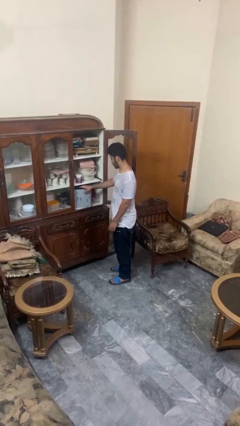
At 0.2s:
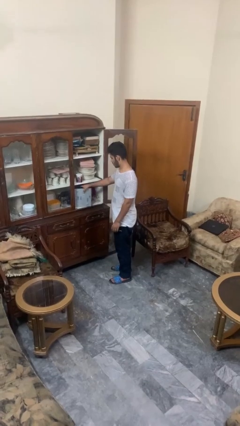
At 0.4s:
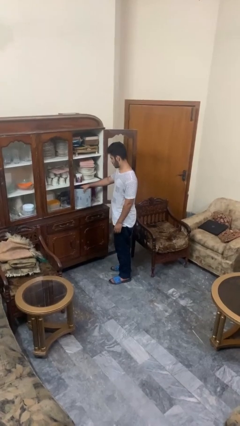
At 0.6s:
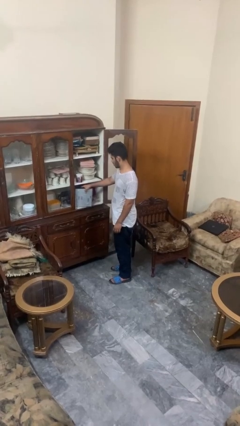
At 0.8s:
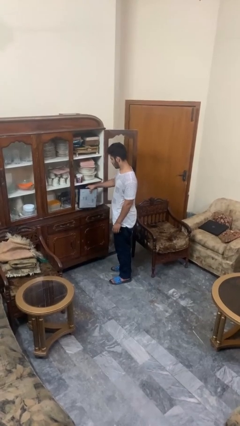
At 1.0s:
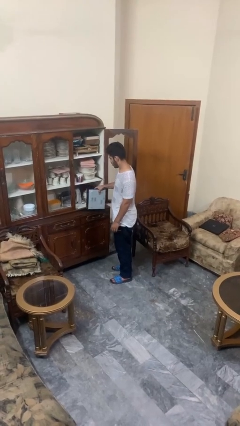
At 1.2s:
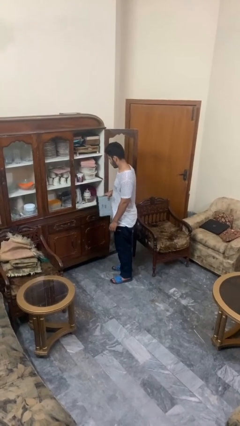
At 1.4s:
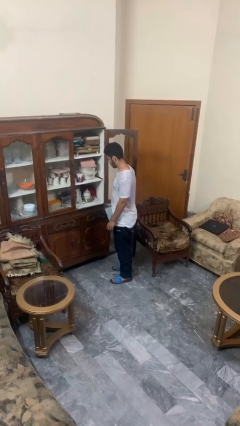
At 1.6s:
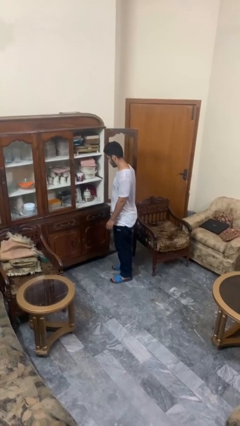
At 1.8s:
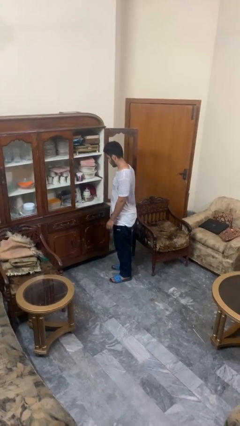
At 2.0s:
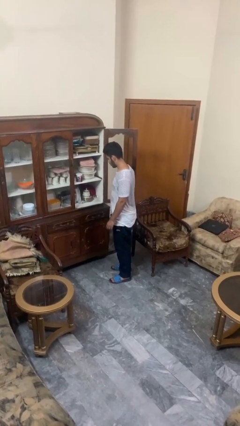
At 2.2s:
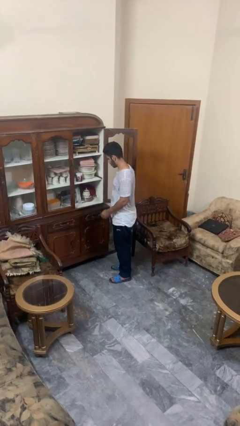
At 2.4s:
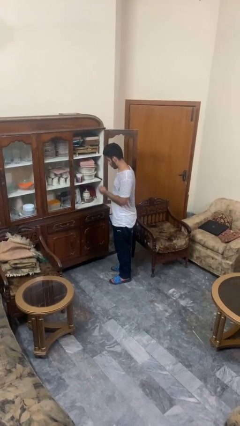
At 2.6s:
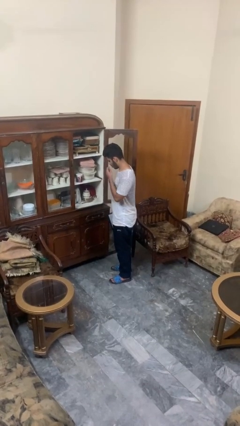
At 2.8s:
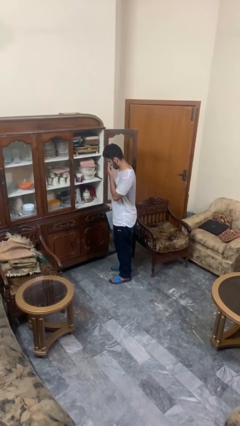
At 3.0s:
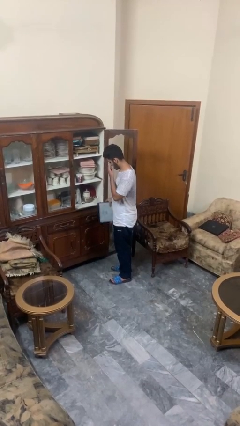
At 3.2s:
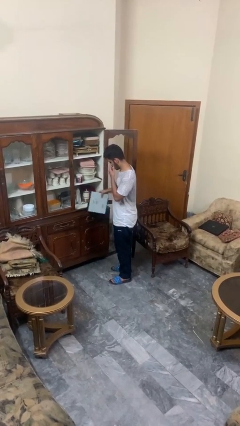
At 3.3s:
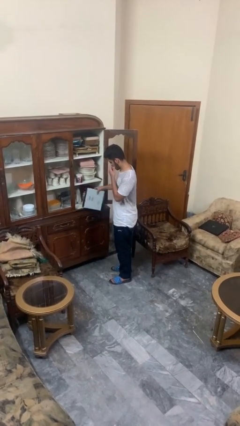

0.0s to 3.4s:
person picks up object from cabinet

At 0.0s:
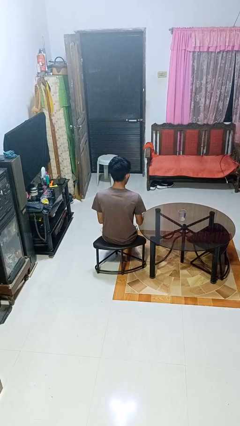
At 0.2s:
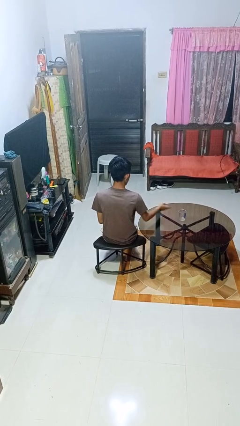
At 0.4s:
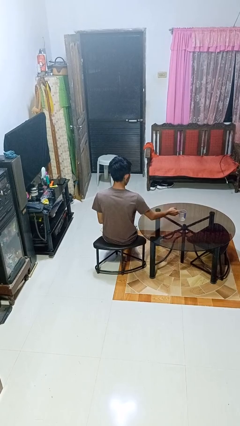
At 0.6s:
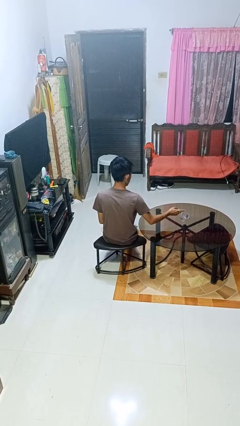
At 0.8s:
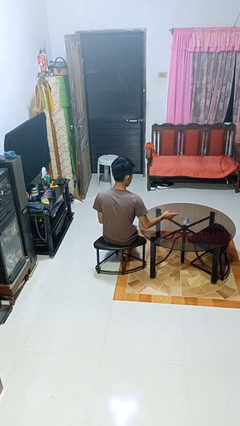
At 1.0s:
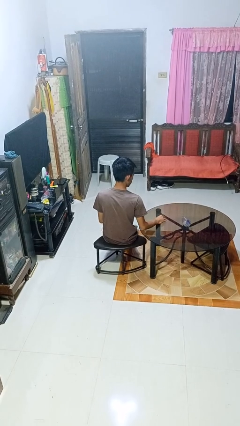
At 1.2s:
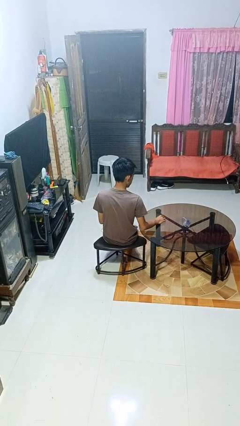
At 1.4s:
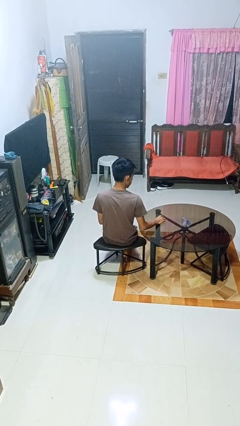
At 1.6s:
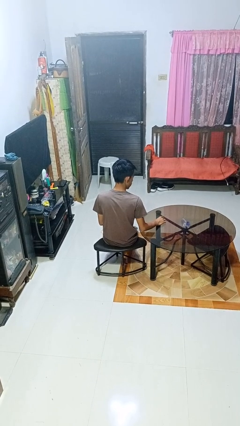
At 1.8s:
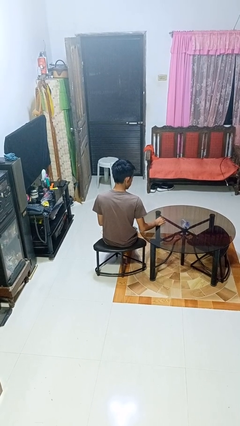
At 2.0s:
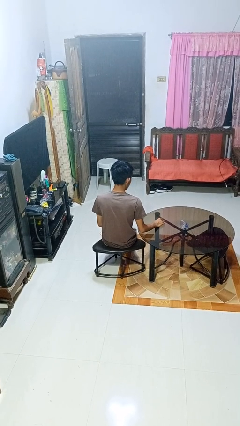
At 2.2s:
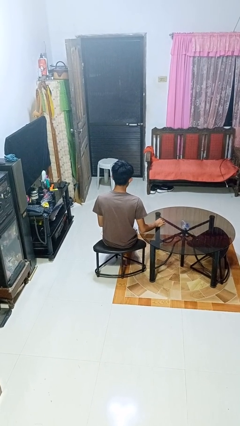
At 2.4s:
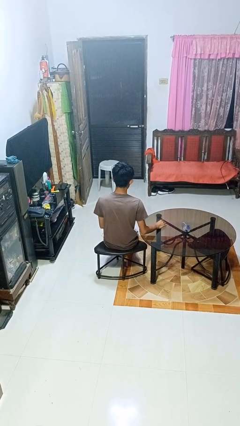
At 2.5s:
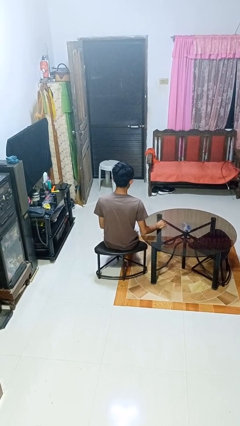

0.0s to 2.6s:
person spills on table

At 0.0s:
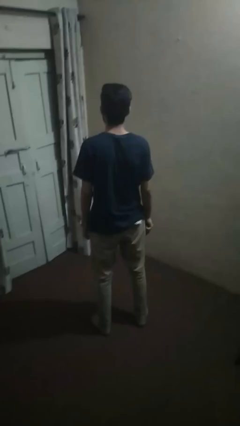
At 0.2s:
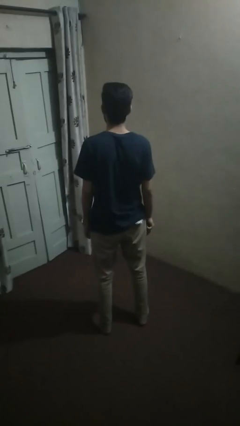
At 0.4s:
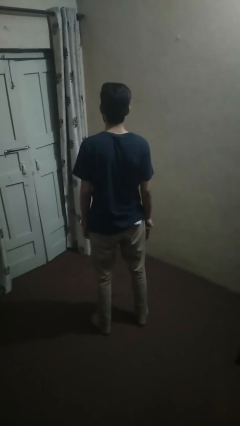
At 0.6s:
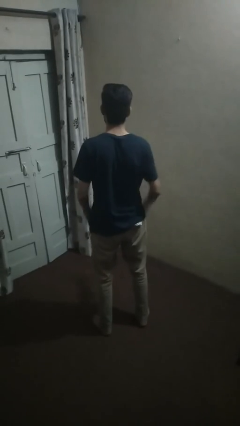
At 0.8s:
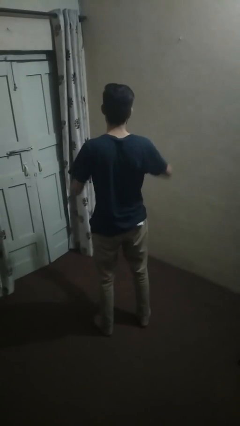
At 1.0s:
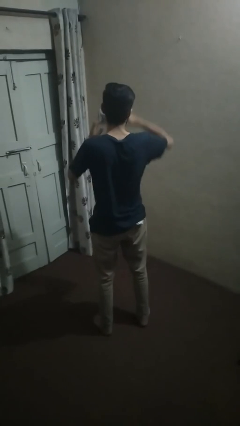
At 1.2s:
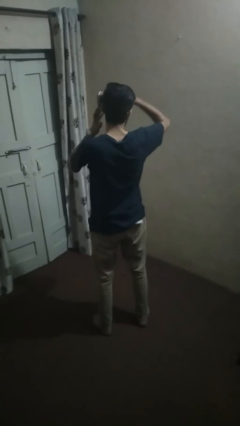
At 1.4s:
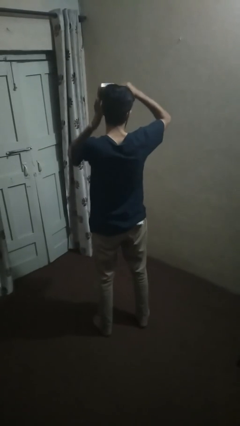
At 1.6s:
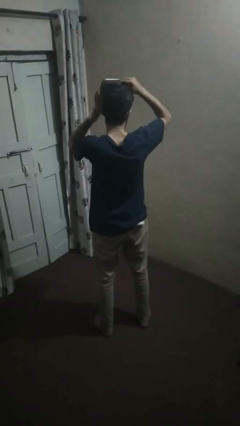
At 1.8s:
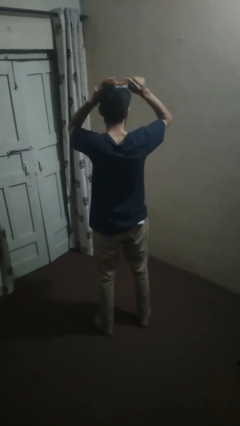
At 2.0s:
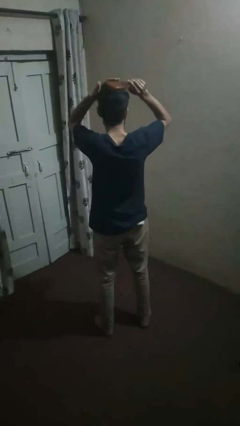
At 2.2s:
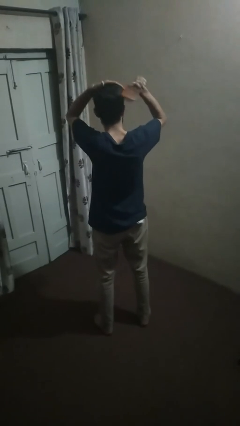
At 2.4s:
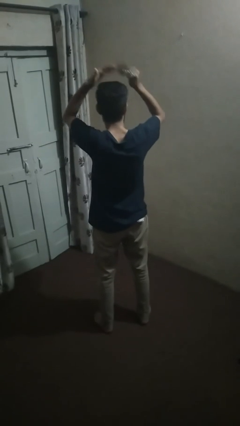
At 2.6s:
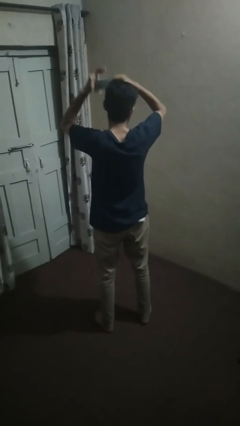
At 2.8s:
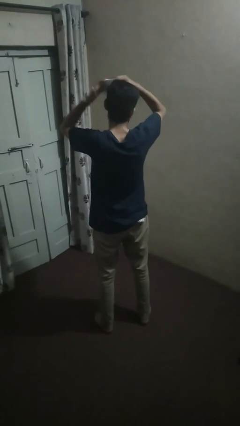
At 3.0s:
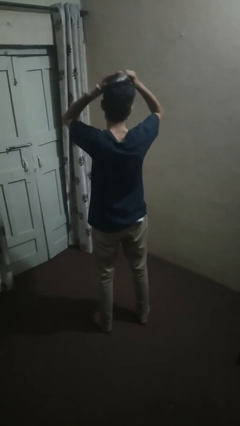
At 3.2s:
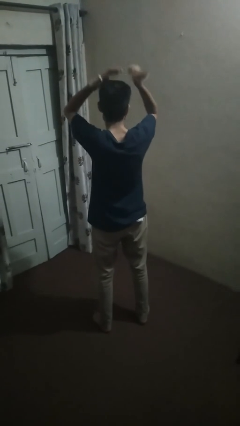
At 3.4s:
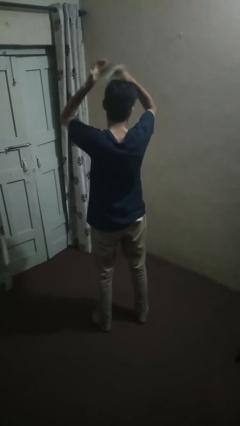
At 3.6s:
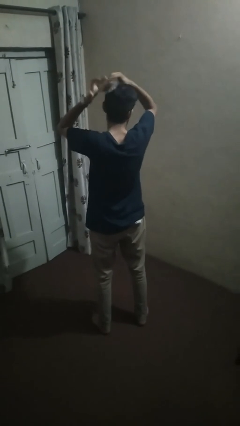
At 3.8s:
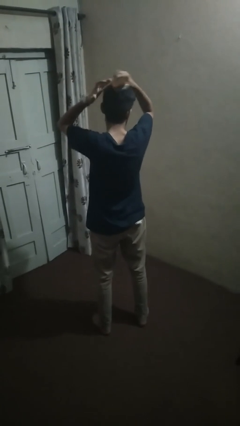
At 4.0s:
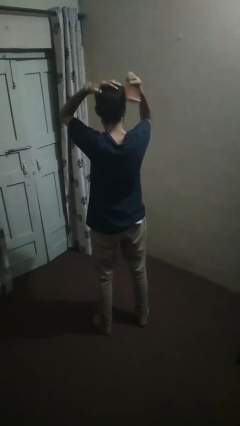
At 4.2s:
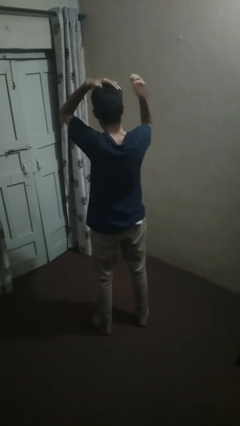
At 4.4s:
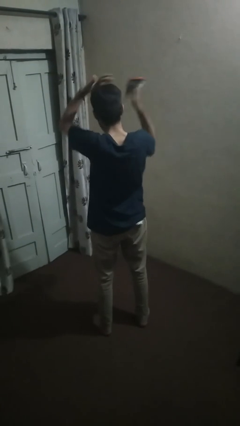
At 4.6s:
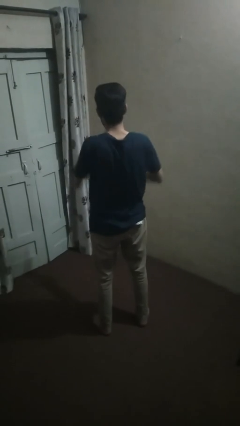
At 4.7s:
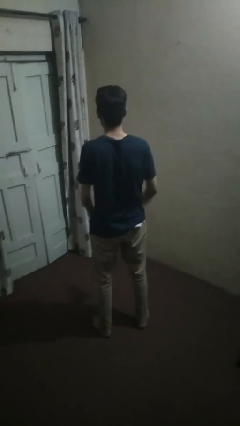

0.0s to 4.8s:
person brushes hair

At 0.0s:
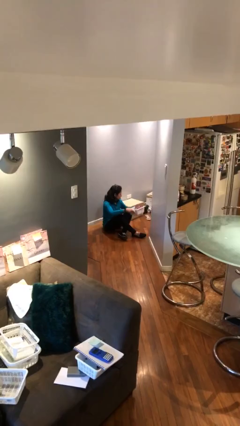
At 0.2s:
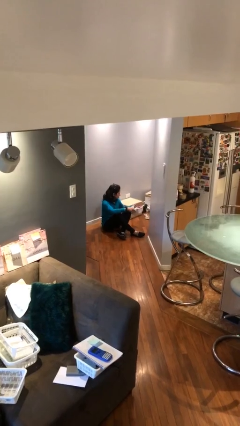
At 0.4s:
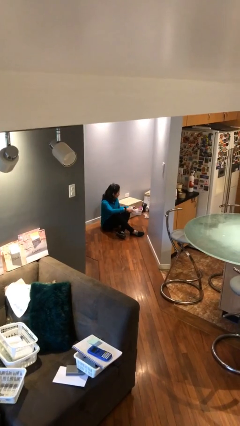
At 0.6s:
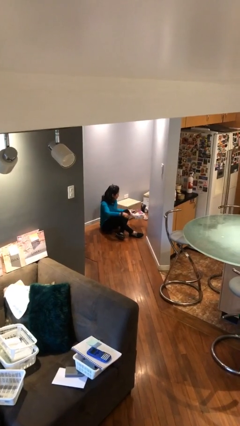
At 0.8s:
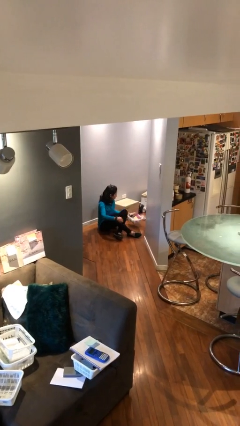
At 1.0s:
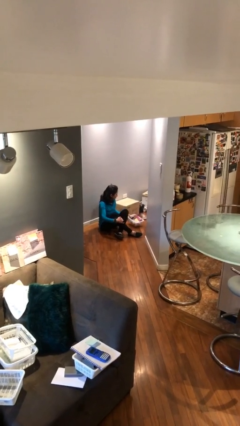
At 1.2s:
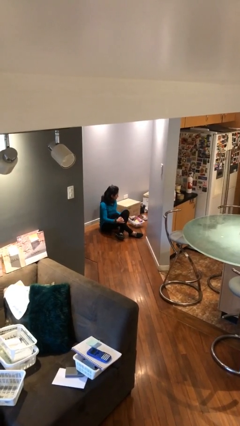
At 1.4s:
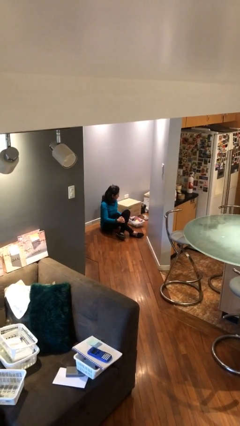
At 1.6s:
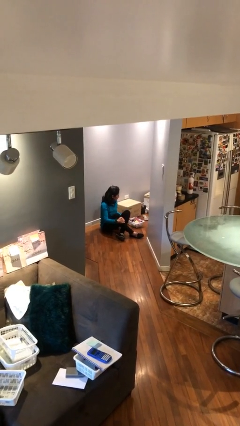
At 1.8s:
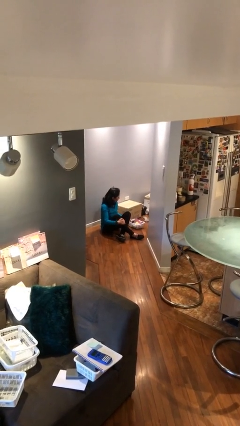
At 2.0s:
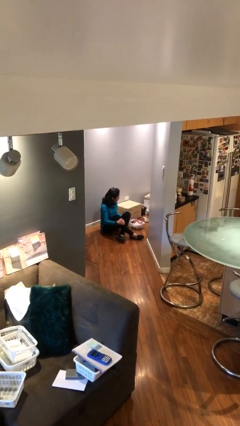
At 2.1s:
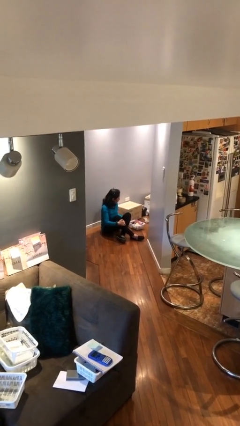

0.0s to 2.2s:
person puts down object on floor

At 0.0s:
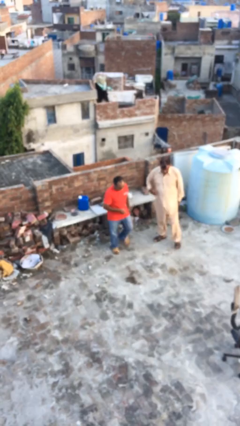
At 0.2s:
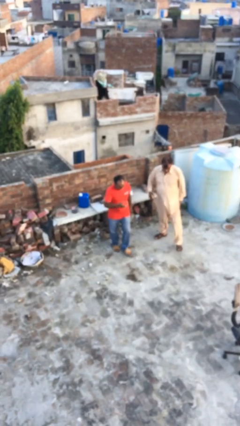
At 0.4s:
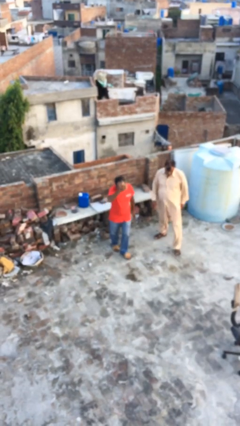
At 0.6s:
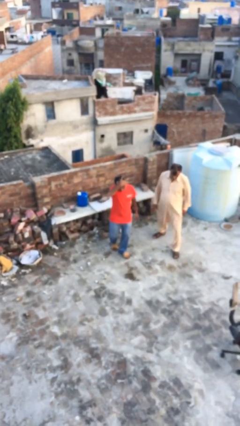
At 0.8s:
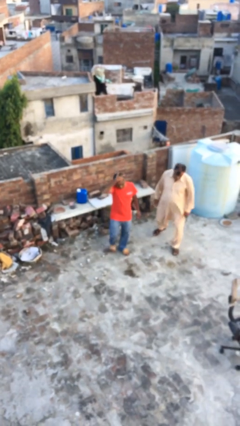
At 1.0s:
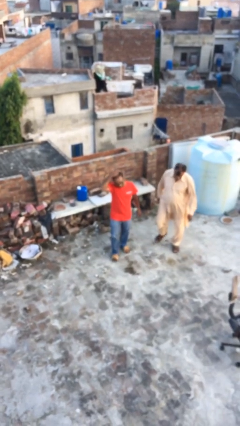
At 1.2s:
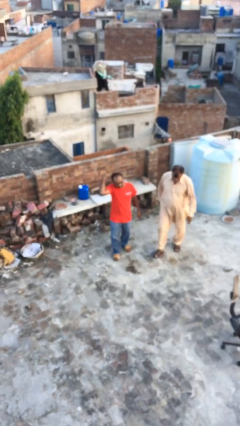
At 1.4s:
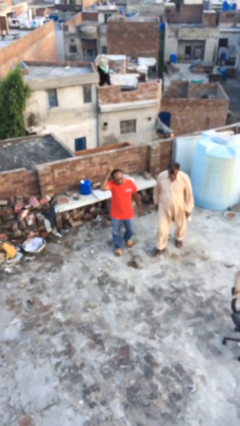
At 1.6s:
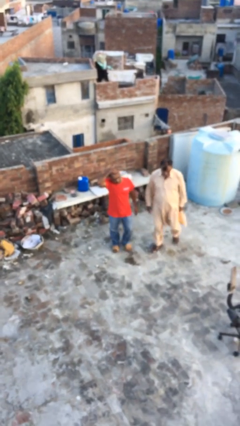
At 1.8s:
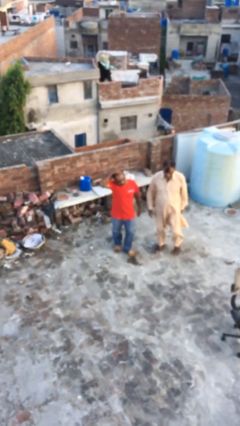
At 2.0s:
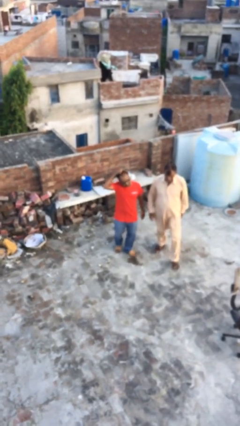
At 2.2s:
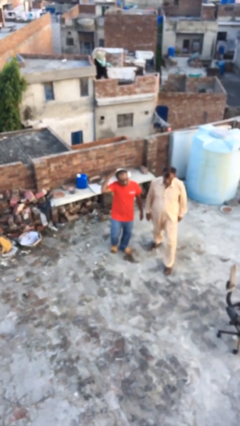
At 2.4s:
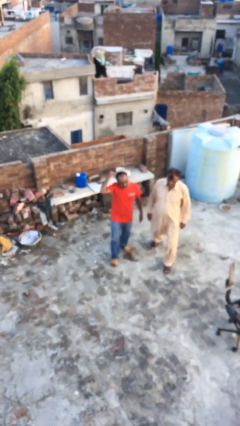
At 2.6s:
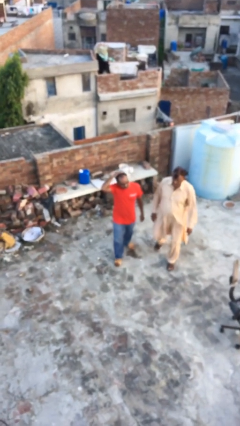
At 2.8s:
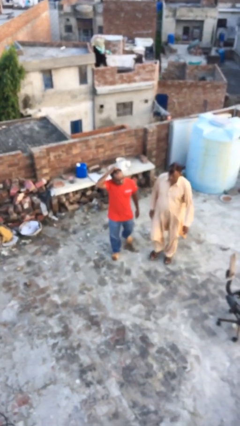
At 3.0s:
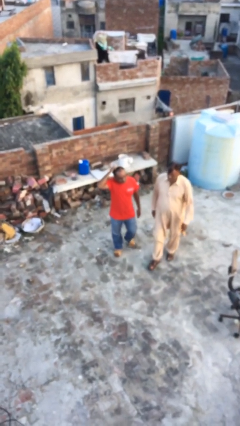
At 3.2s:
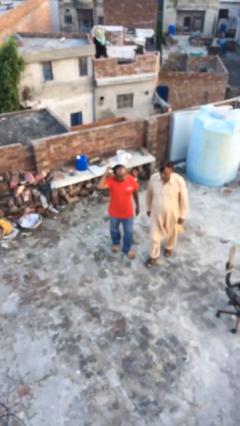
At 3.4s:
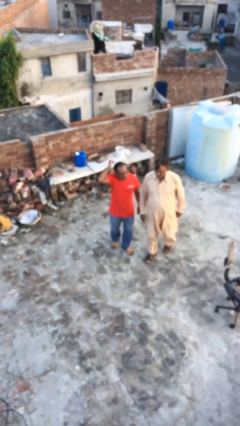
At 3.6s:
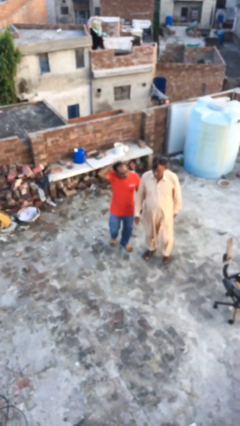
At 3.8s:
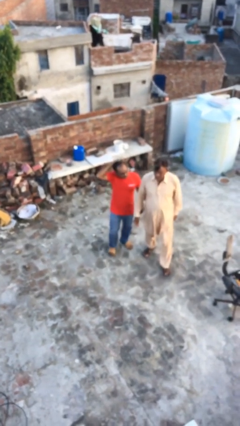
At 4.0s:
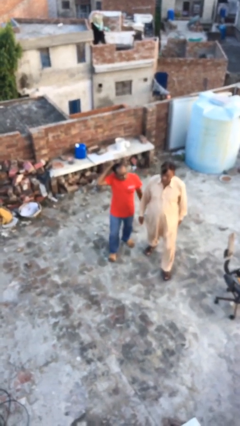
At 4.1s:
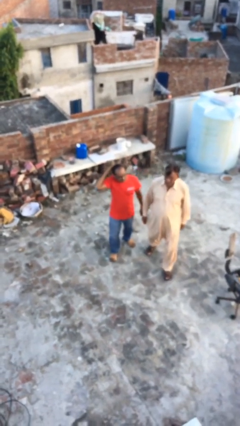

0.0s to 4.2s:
person talks to person

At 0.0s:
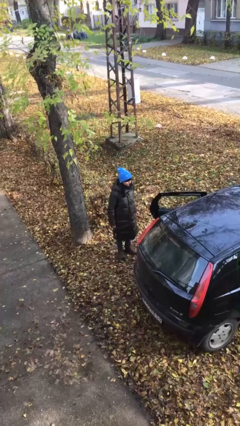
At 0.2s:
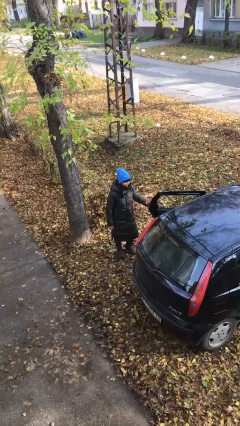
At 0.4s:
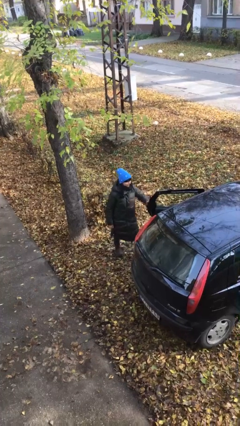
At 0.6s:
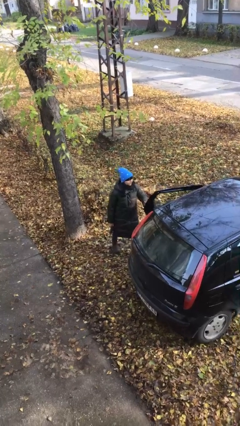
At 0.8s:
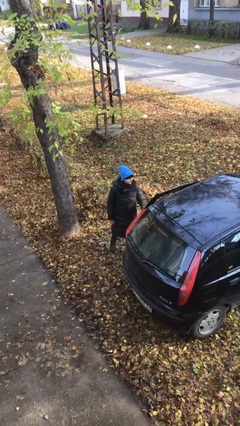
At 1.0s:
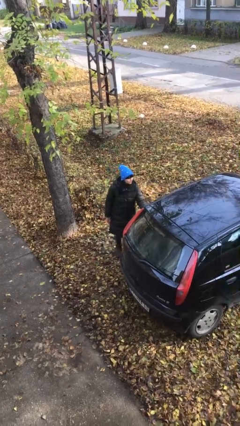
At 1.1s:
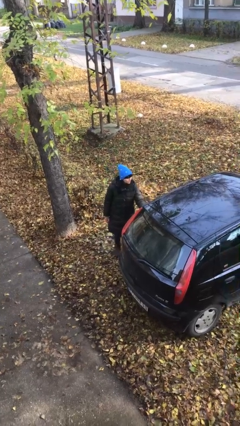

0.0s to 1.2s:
person closes car door
